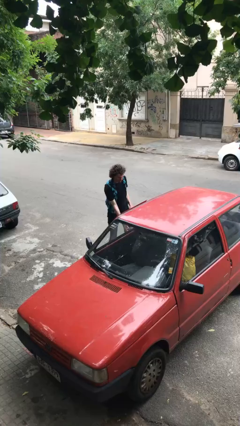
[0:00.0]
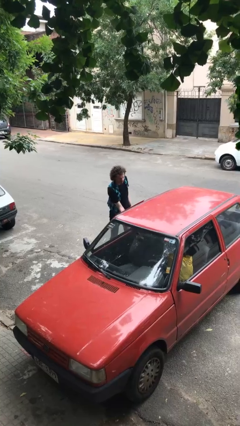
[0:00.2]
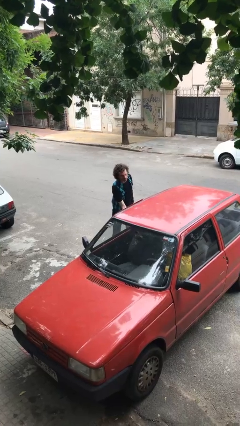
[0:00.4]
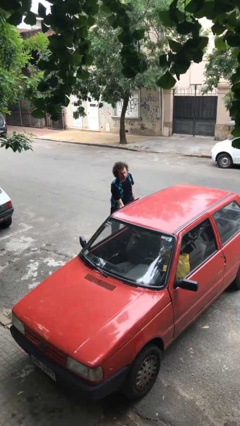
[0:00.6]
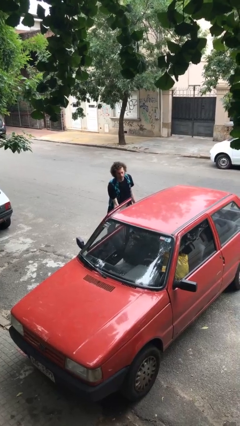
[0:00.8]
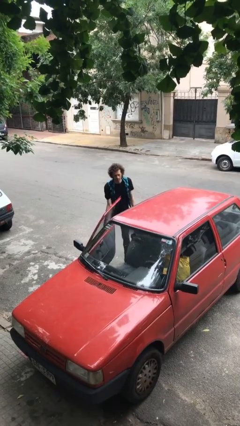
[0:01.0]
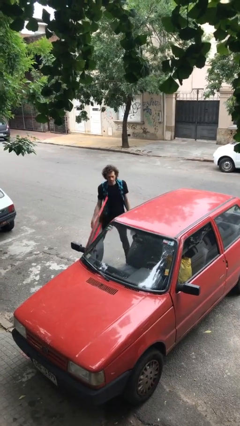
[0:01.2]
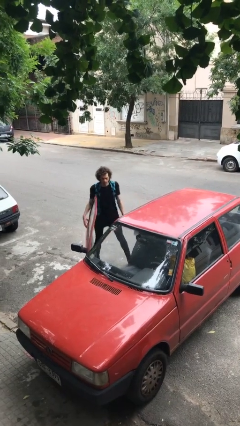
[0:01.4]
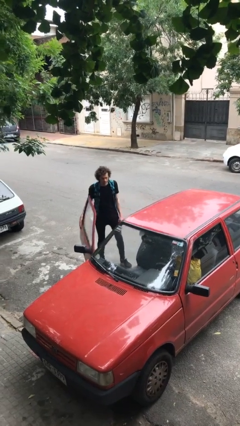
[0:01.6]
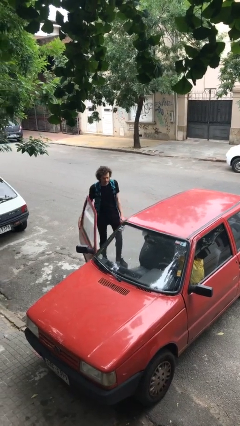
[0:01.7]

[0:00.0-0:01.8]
person opens car trunk

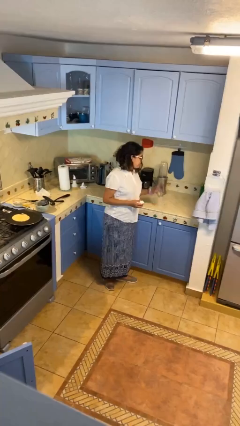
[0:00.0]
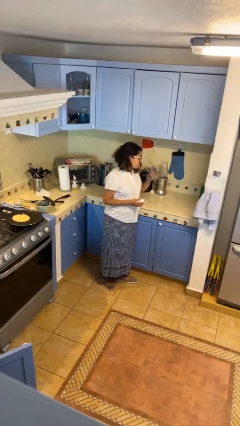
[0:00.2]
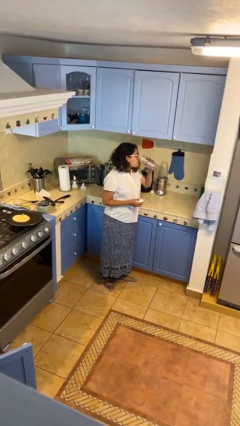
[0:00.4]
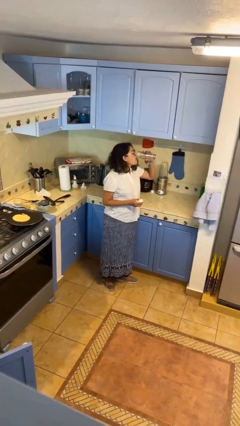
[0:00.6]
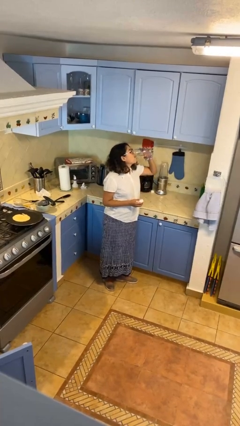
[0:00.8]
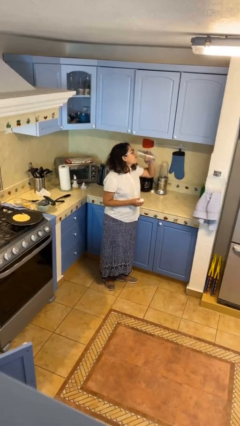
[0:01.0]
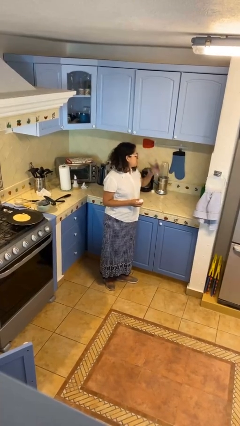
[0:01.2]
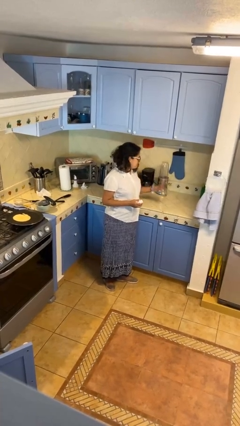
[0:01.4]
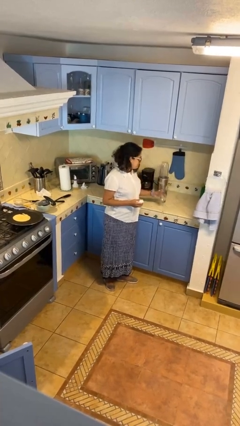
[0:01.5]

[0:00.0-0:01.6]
person drinks from cup

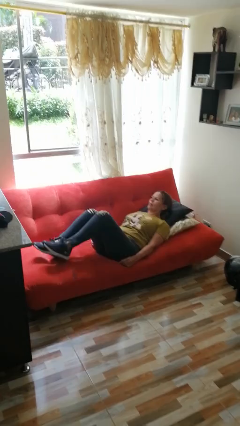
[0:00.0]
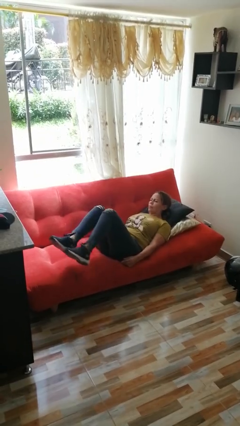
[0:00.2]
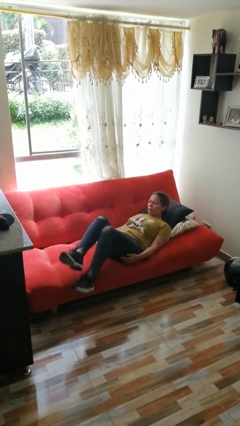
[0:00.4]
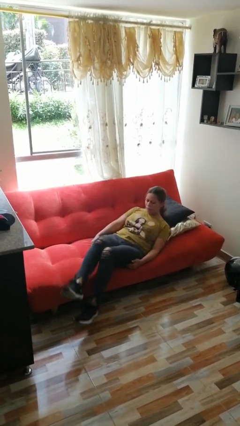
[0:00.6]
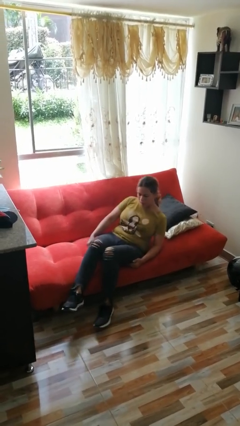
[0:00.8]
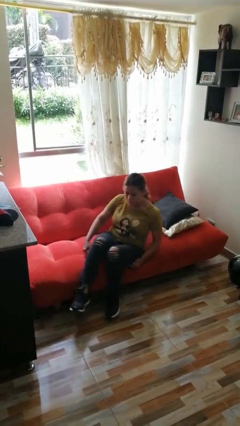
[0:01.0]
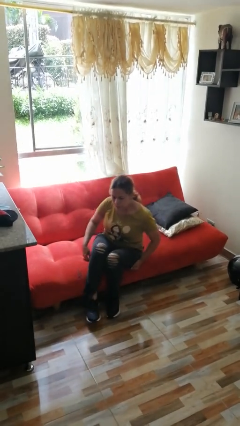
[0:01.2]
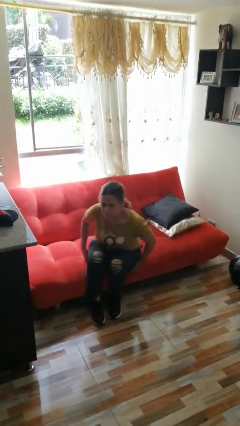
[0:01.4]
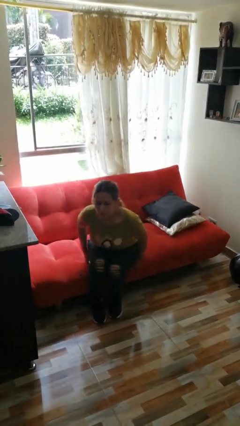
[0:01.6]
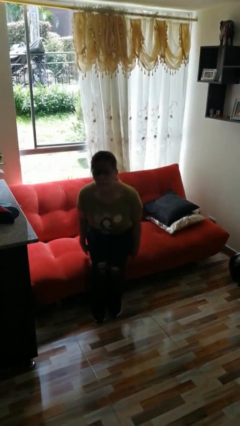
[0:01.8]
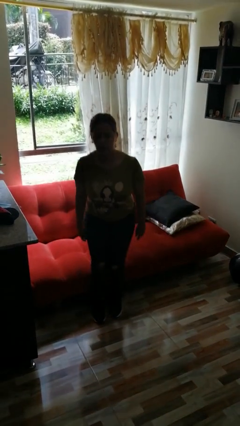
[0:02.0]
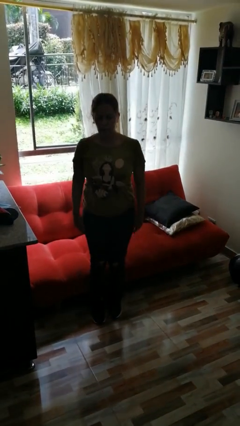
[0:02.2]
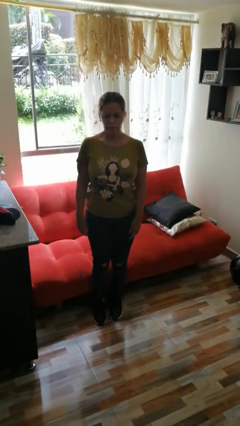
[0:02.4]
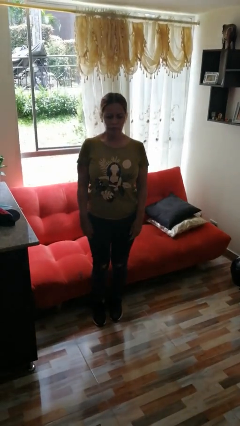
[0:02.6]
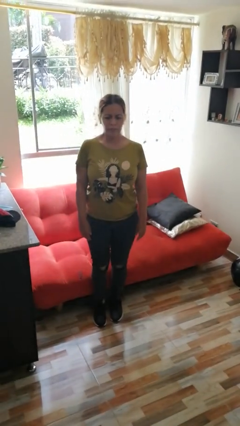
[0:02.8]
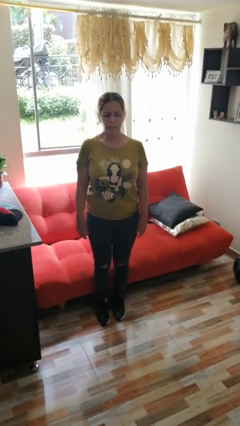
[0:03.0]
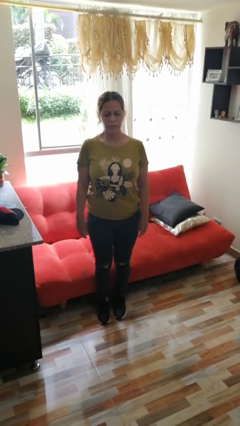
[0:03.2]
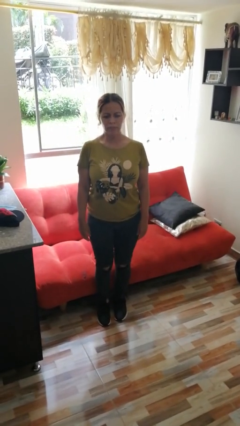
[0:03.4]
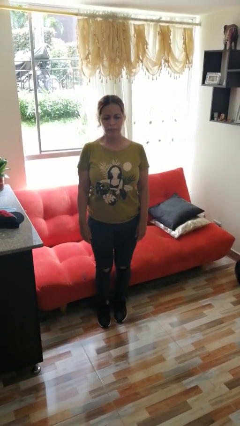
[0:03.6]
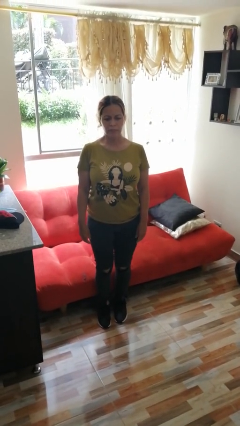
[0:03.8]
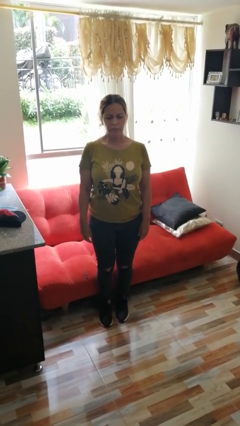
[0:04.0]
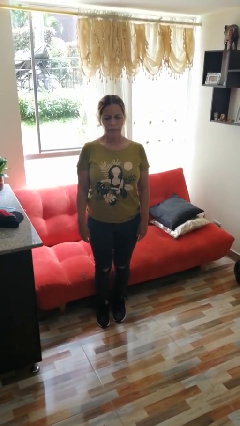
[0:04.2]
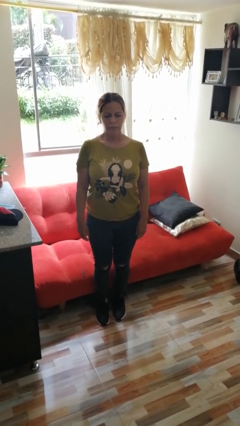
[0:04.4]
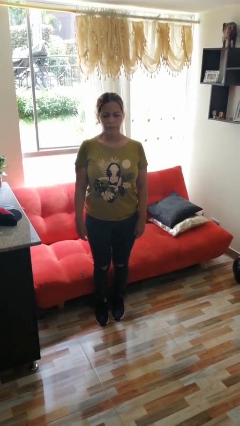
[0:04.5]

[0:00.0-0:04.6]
person stands up

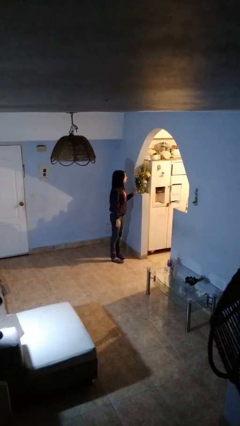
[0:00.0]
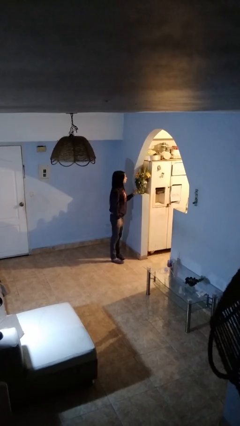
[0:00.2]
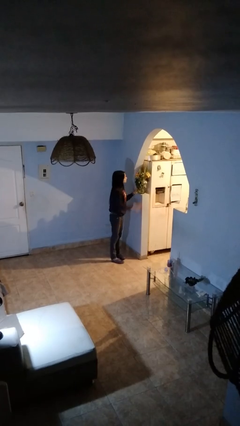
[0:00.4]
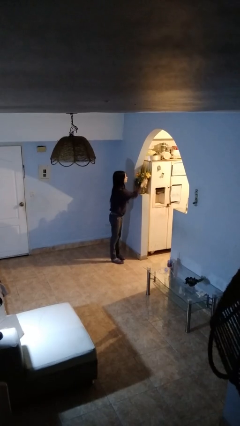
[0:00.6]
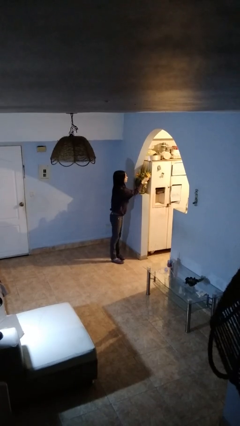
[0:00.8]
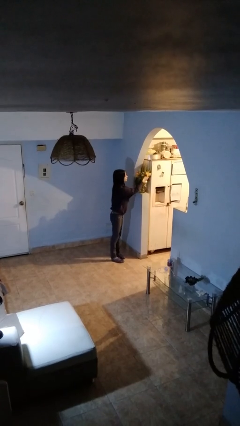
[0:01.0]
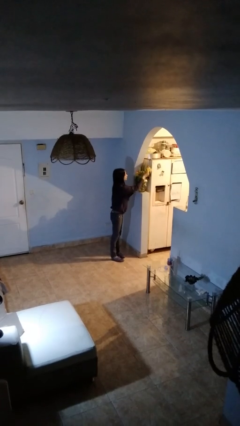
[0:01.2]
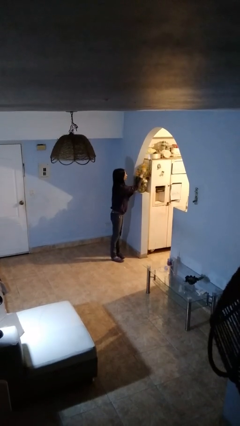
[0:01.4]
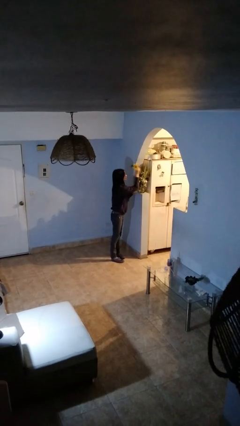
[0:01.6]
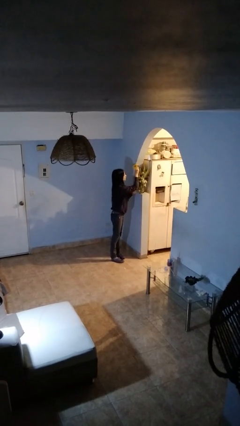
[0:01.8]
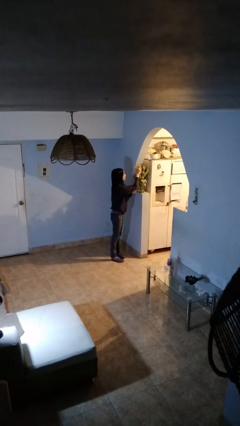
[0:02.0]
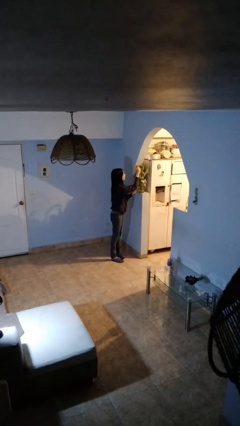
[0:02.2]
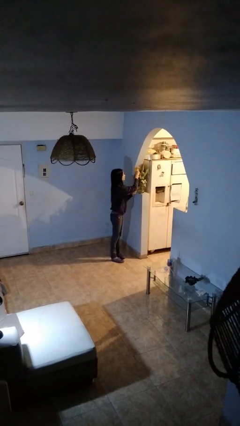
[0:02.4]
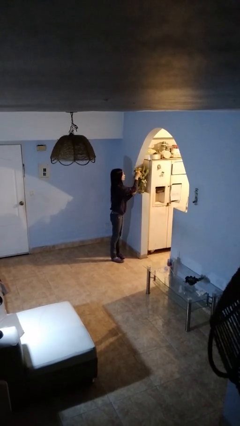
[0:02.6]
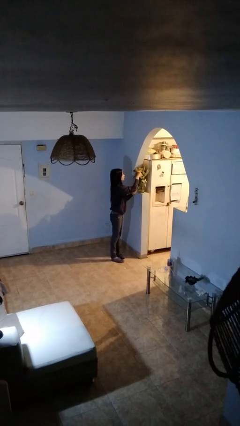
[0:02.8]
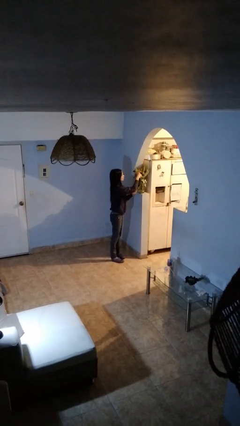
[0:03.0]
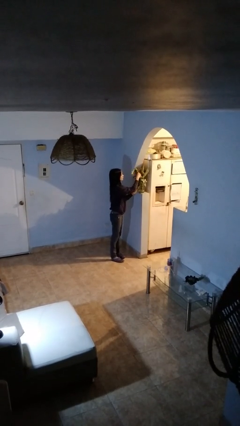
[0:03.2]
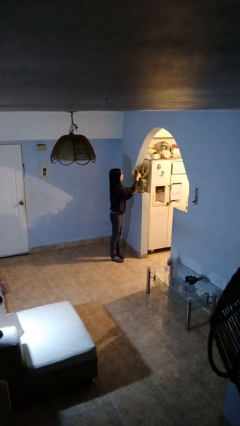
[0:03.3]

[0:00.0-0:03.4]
person arranges flowers in vase

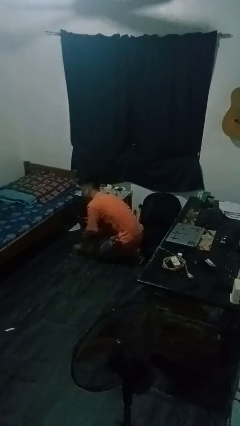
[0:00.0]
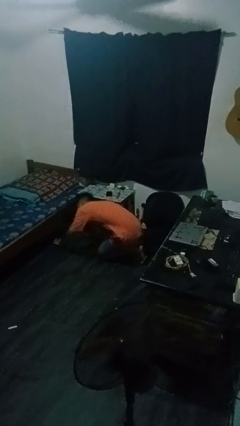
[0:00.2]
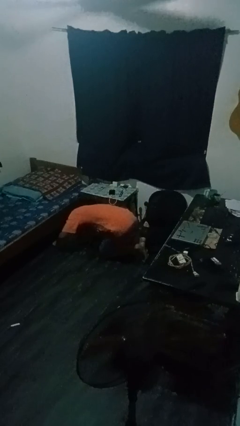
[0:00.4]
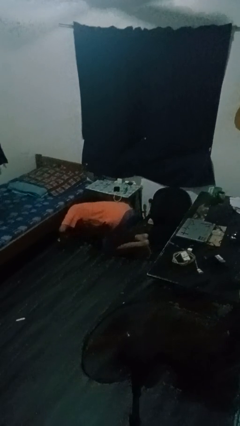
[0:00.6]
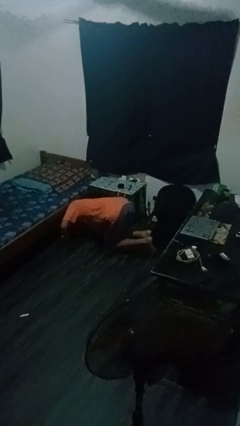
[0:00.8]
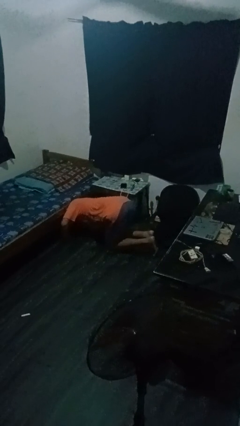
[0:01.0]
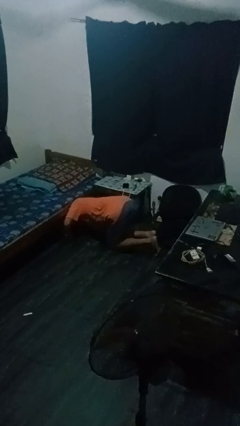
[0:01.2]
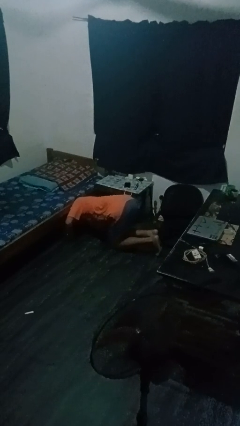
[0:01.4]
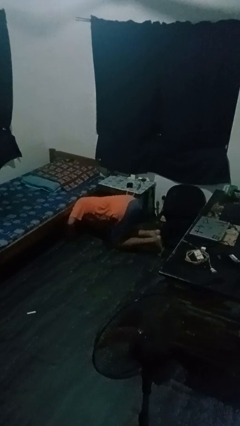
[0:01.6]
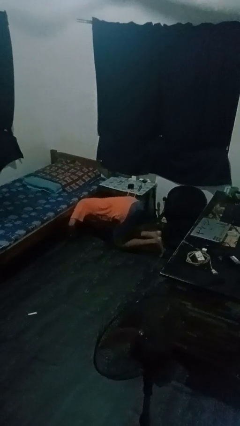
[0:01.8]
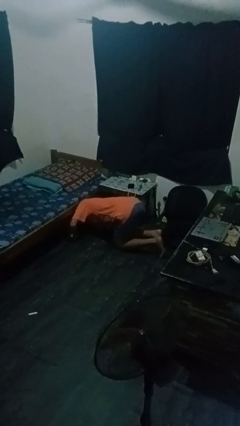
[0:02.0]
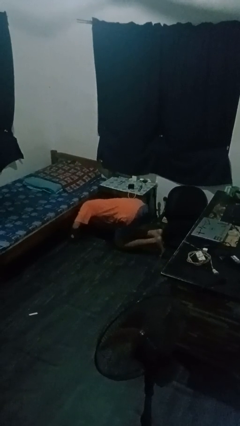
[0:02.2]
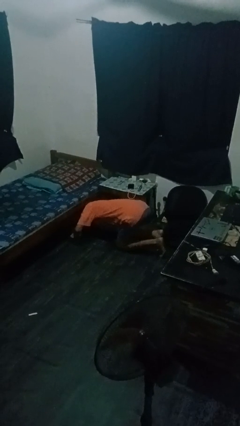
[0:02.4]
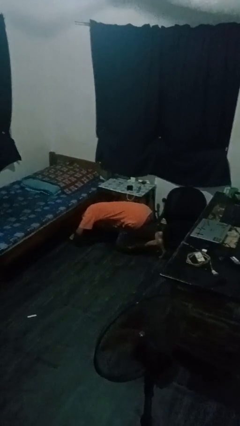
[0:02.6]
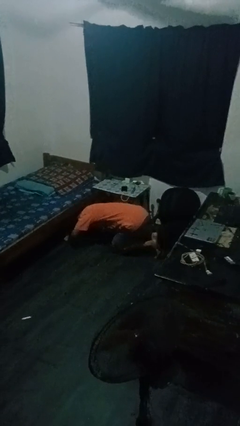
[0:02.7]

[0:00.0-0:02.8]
person searches under bed

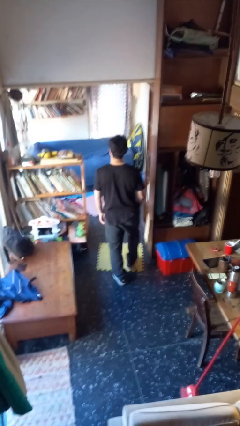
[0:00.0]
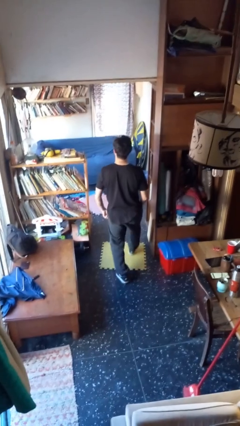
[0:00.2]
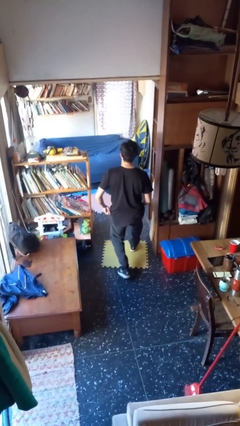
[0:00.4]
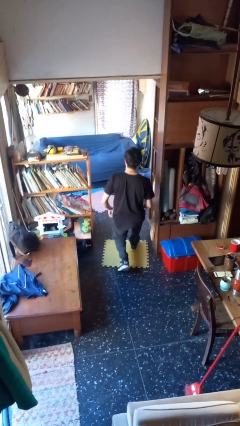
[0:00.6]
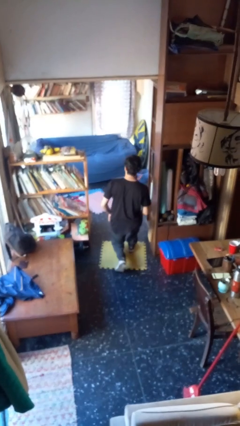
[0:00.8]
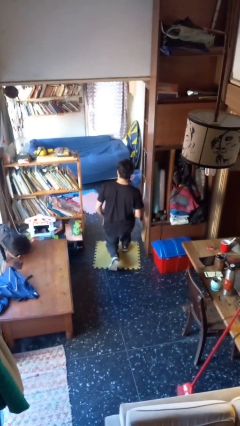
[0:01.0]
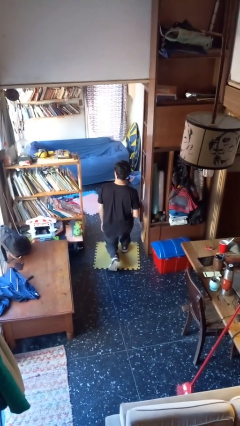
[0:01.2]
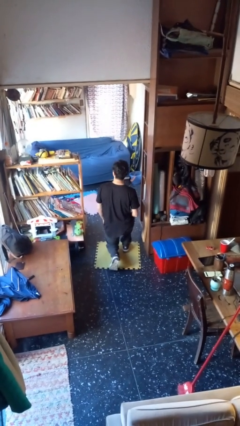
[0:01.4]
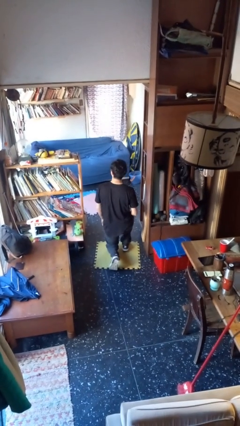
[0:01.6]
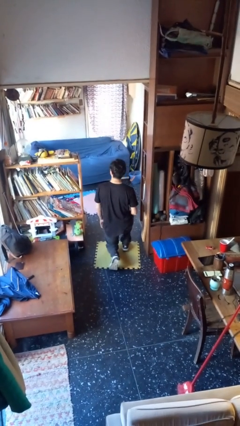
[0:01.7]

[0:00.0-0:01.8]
person kneels

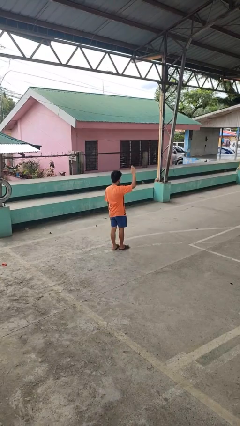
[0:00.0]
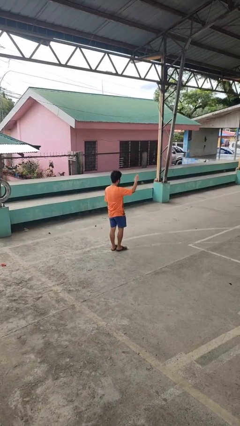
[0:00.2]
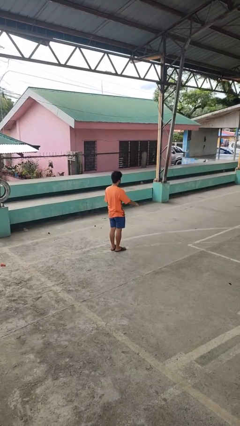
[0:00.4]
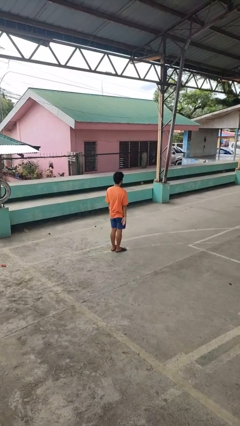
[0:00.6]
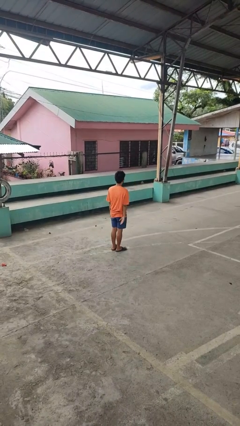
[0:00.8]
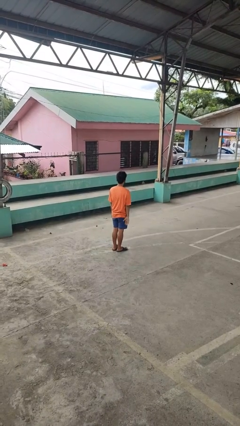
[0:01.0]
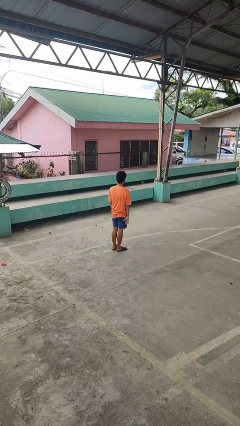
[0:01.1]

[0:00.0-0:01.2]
person gestures lower hand
